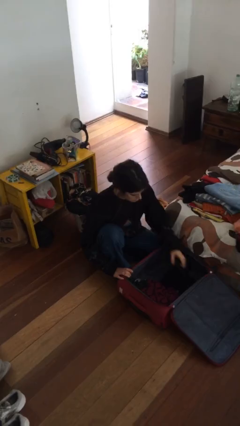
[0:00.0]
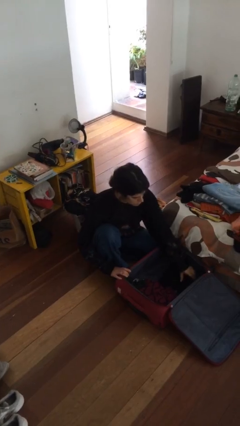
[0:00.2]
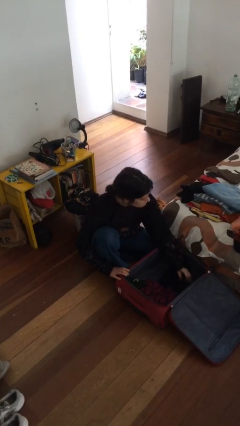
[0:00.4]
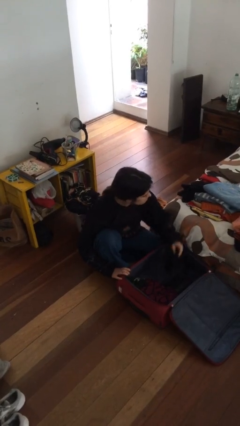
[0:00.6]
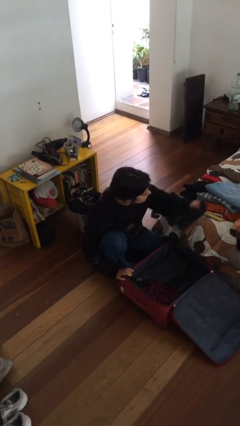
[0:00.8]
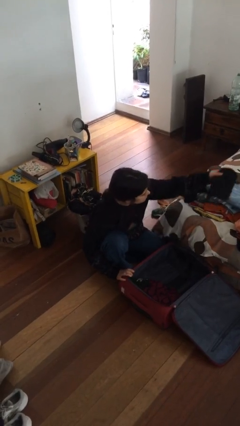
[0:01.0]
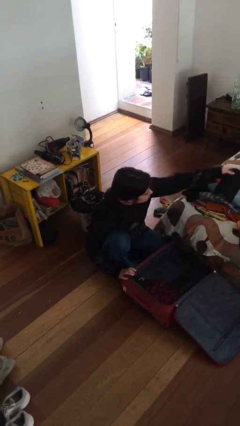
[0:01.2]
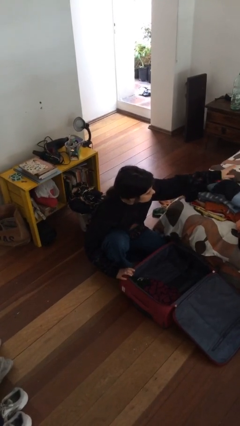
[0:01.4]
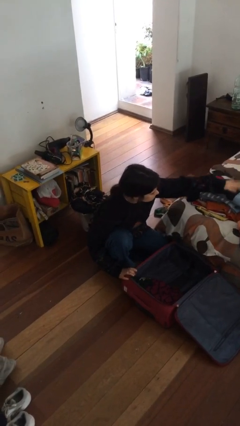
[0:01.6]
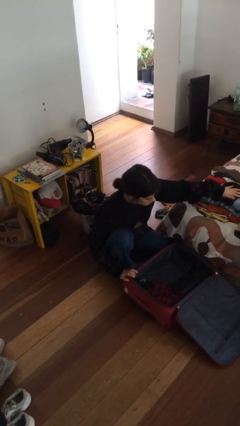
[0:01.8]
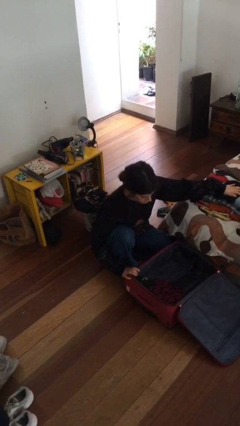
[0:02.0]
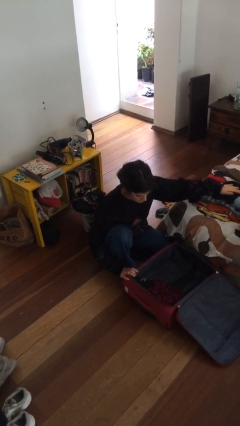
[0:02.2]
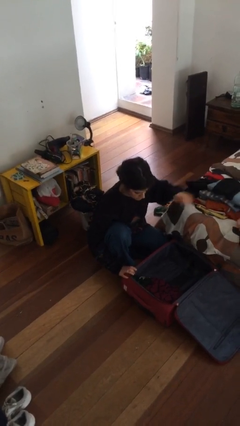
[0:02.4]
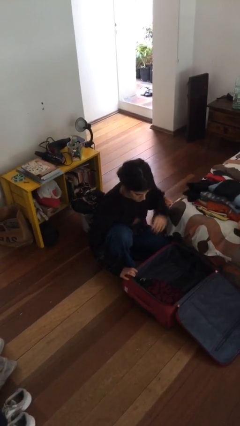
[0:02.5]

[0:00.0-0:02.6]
person unloads clothes from suitcase

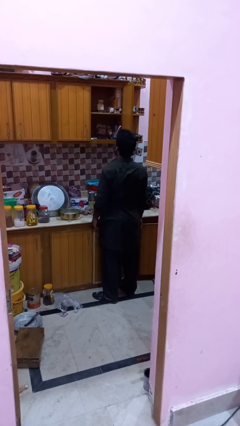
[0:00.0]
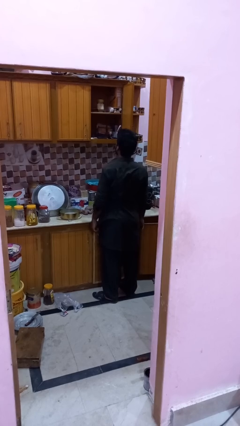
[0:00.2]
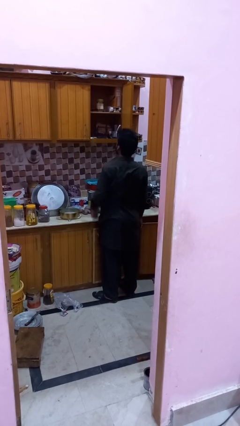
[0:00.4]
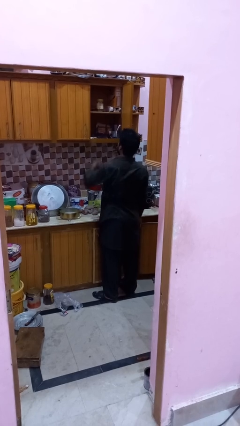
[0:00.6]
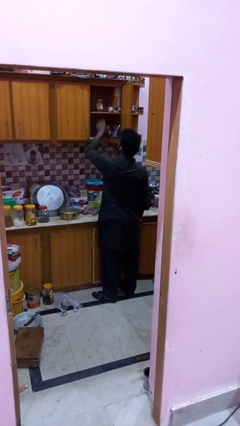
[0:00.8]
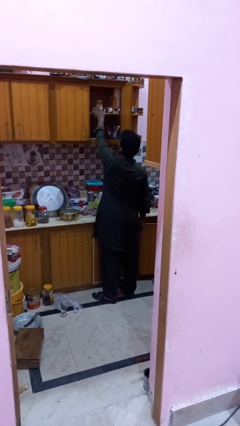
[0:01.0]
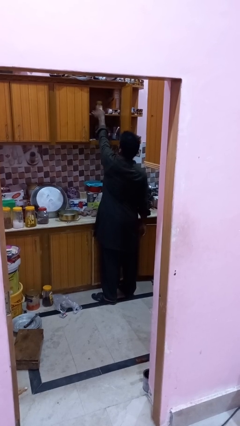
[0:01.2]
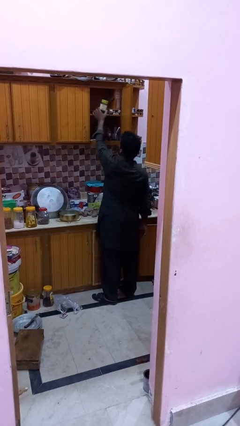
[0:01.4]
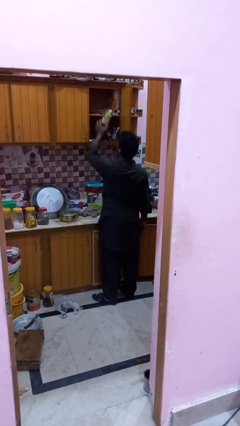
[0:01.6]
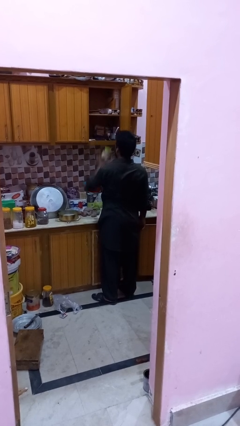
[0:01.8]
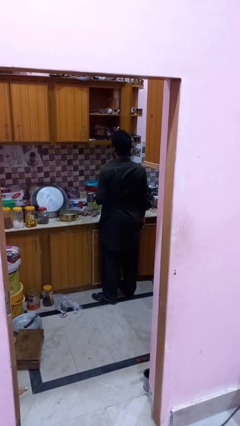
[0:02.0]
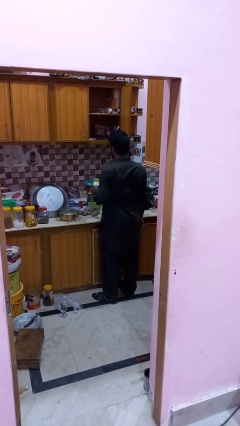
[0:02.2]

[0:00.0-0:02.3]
person takes object from cabinet

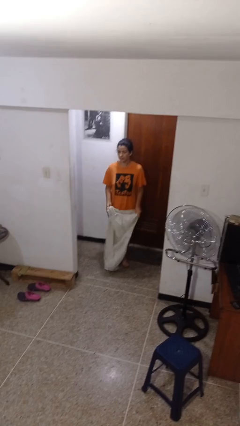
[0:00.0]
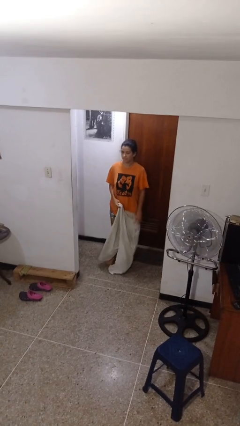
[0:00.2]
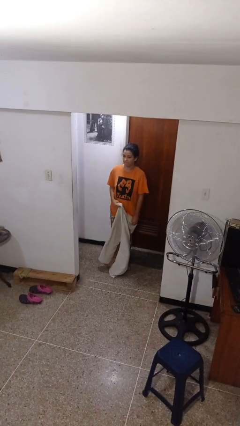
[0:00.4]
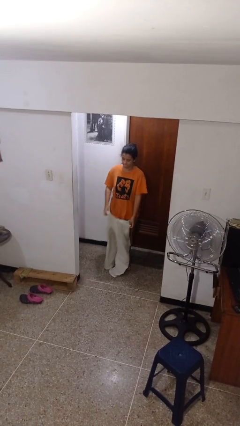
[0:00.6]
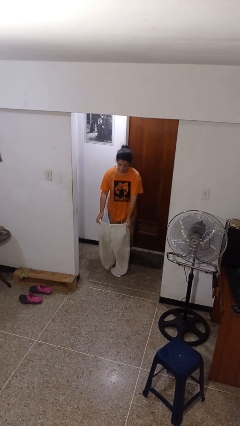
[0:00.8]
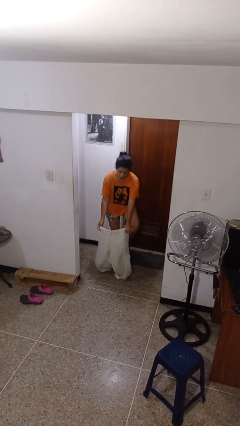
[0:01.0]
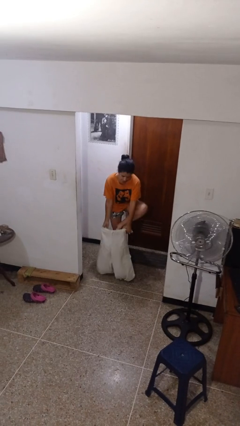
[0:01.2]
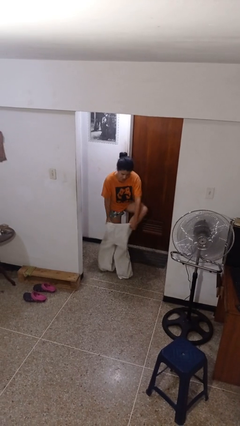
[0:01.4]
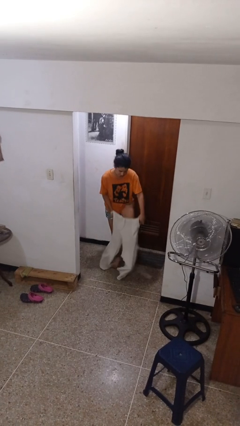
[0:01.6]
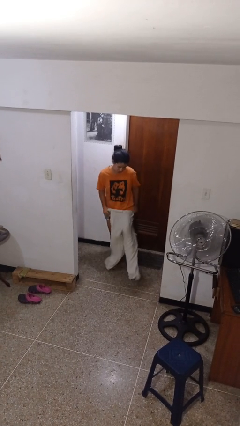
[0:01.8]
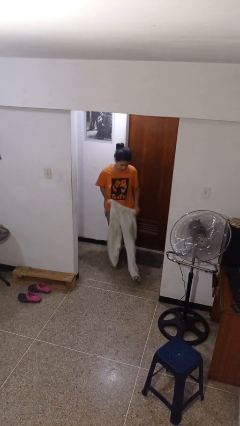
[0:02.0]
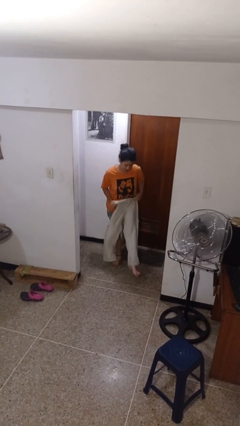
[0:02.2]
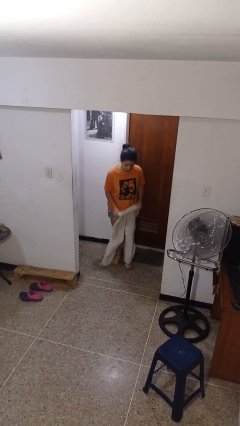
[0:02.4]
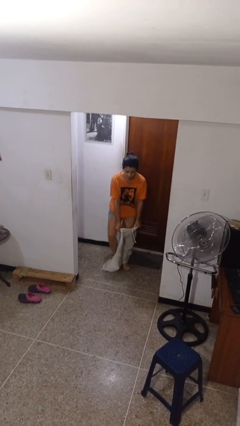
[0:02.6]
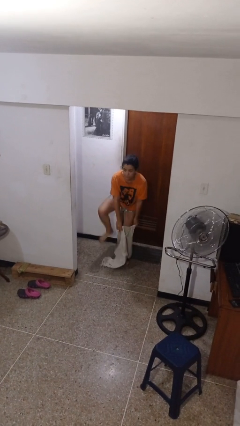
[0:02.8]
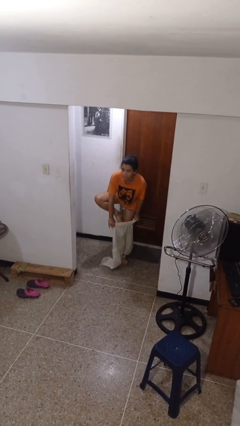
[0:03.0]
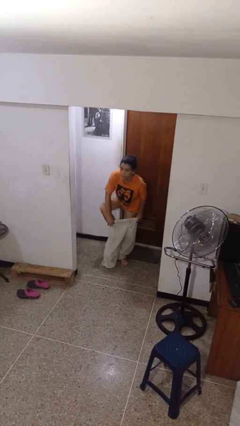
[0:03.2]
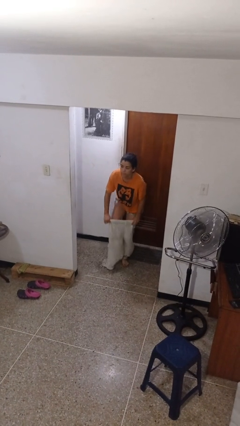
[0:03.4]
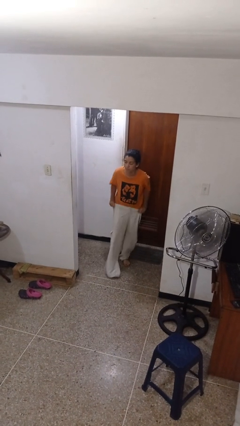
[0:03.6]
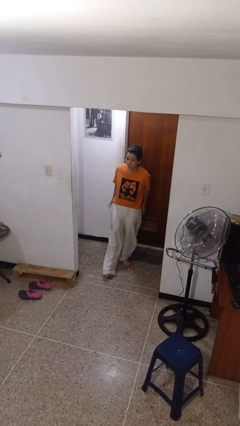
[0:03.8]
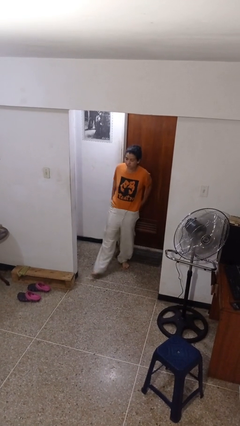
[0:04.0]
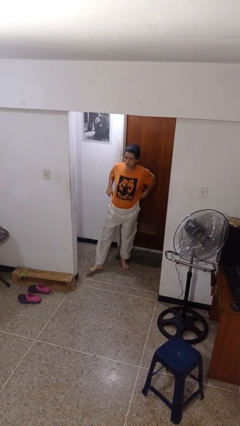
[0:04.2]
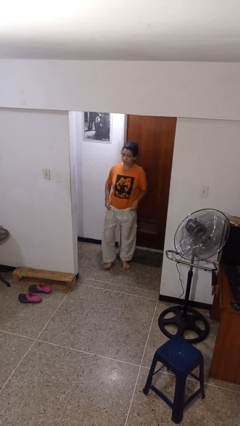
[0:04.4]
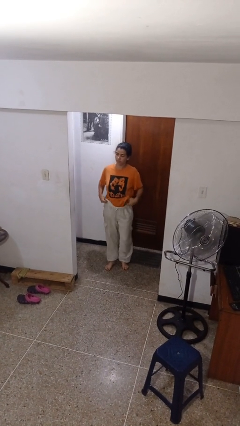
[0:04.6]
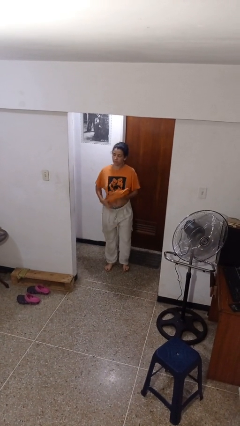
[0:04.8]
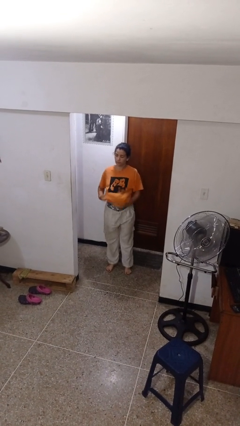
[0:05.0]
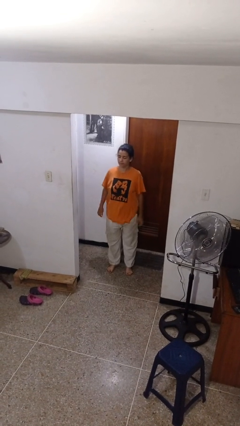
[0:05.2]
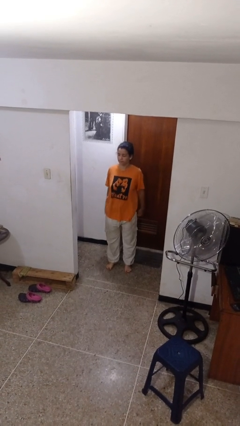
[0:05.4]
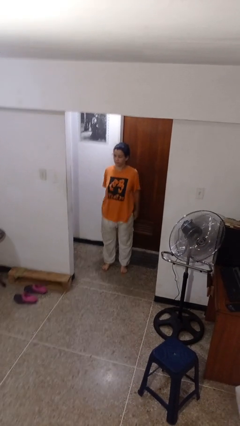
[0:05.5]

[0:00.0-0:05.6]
person puts on pants

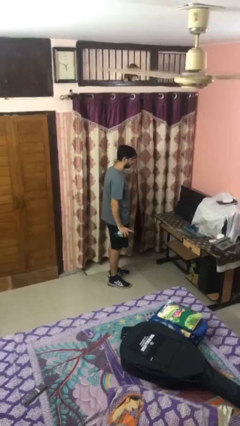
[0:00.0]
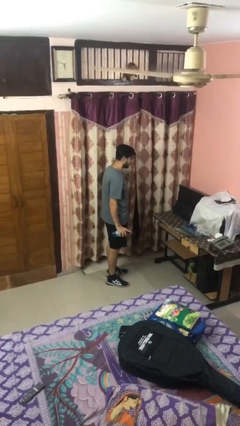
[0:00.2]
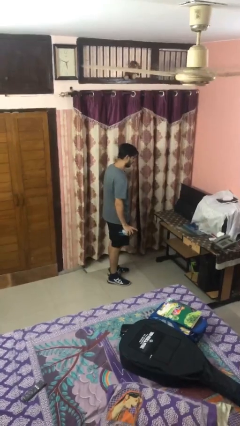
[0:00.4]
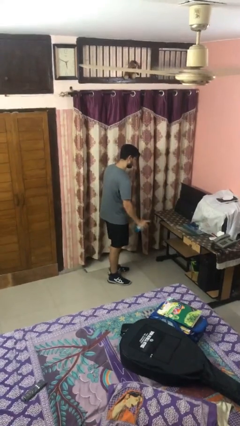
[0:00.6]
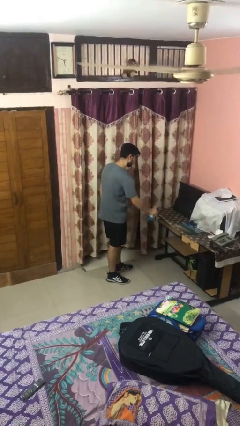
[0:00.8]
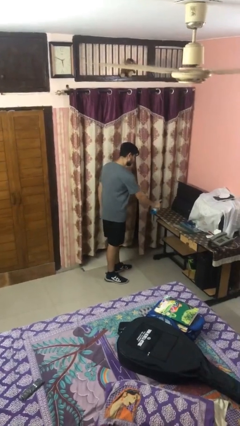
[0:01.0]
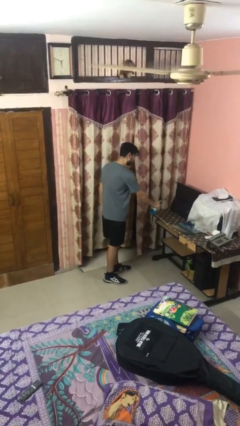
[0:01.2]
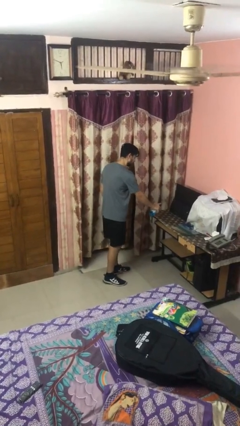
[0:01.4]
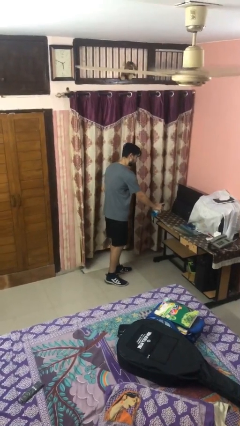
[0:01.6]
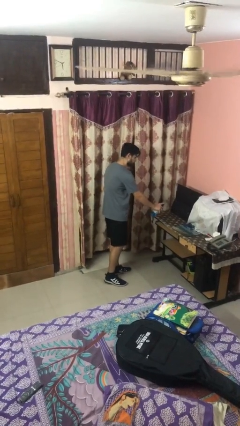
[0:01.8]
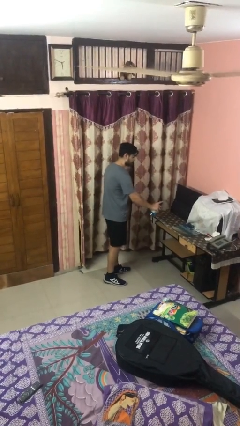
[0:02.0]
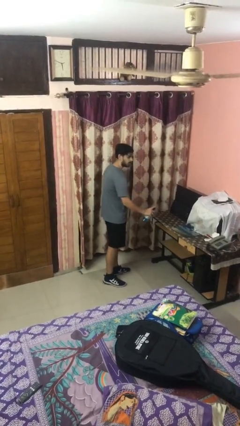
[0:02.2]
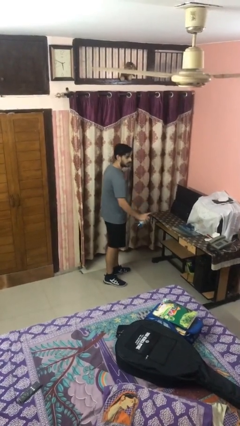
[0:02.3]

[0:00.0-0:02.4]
person sprays from bottle

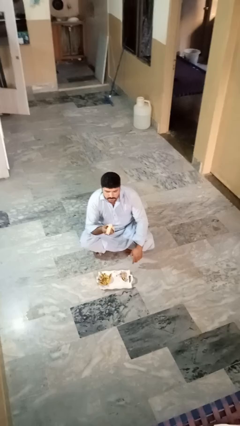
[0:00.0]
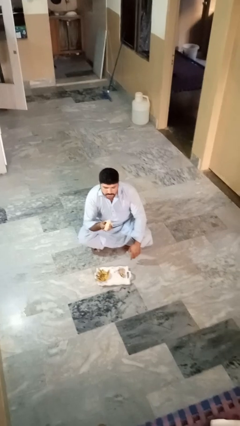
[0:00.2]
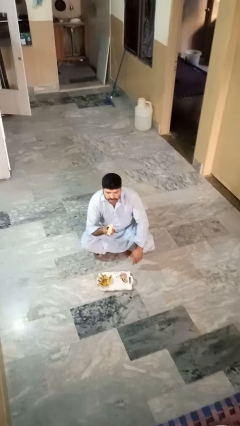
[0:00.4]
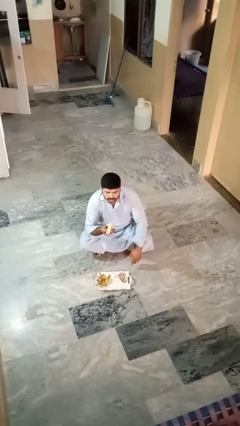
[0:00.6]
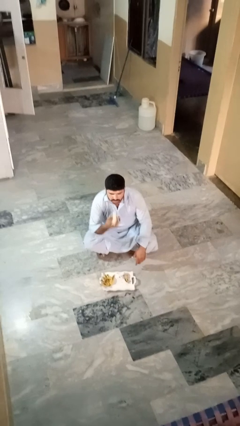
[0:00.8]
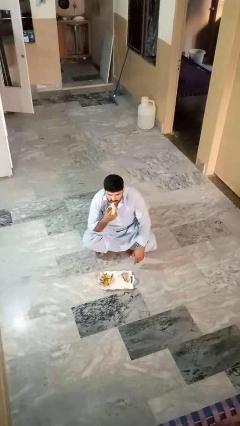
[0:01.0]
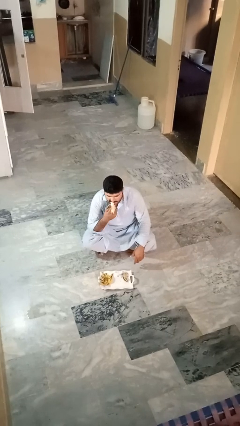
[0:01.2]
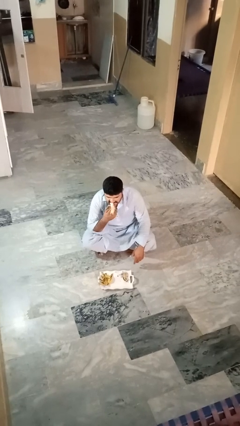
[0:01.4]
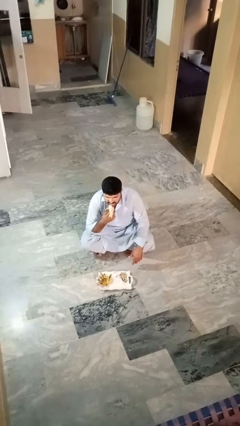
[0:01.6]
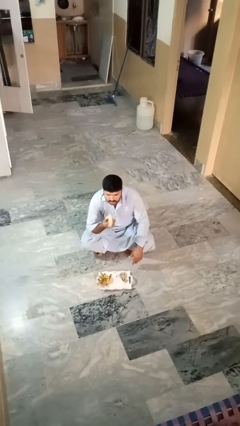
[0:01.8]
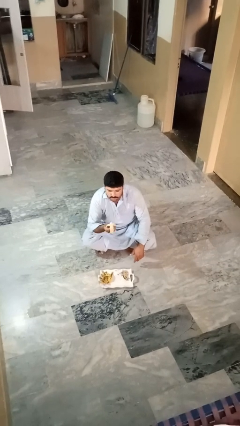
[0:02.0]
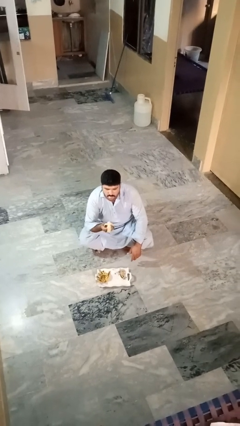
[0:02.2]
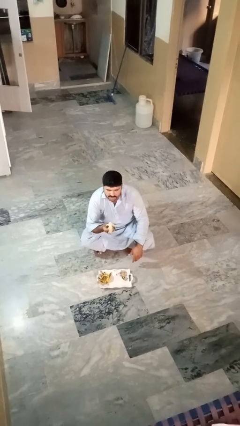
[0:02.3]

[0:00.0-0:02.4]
person eats banana

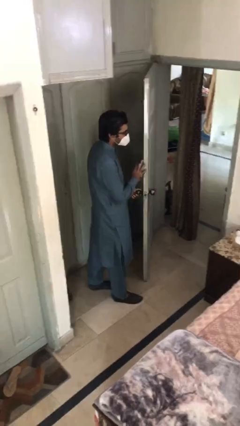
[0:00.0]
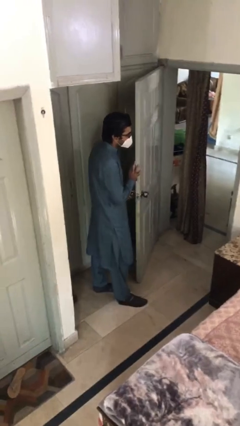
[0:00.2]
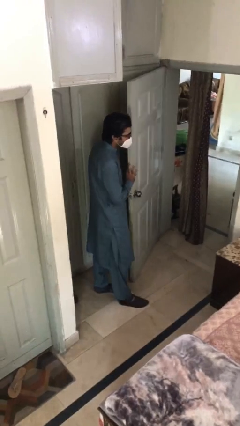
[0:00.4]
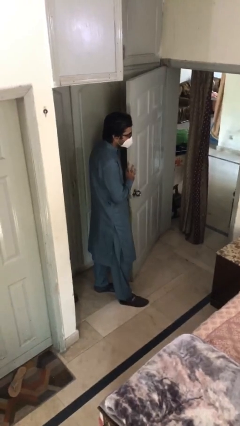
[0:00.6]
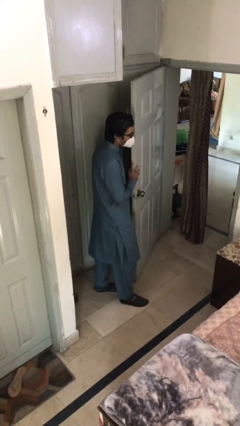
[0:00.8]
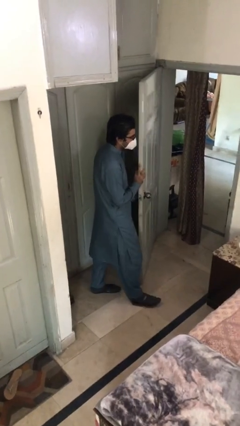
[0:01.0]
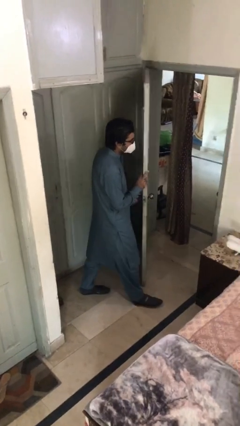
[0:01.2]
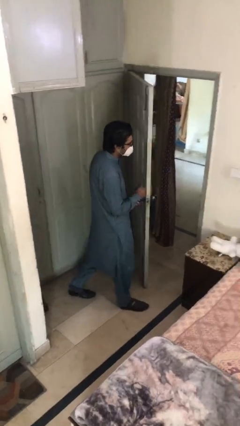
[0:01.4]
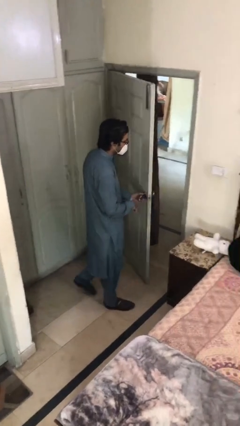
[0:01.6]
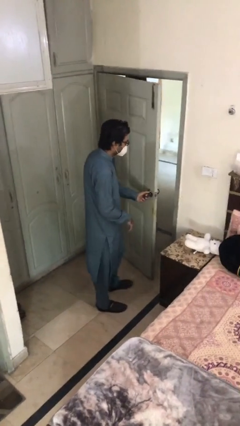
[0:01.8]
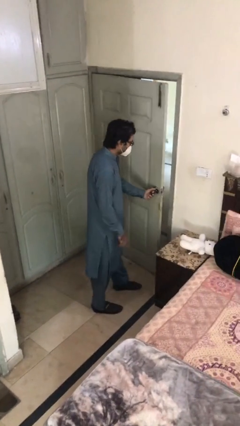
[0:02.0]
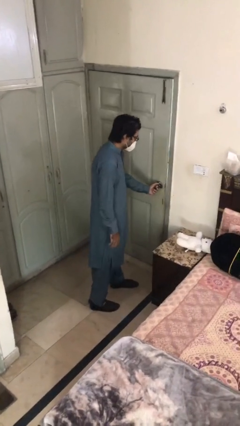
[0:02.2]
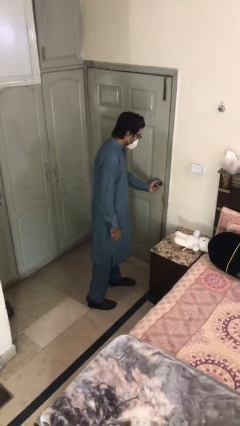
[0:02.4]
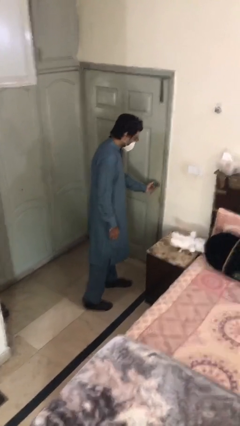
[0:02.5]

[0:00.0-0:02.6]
person closes facility door
